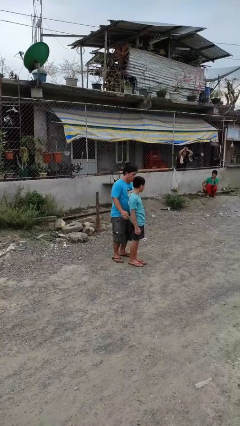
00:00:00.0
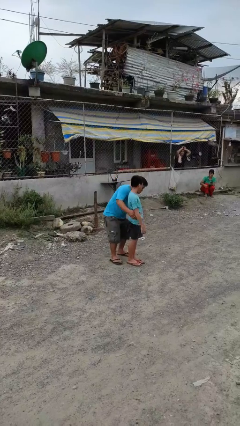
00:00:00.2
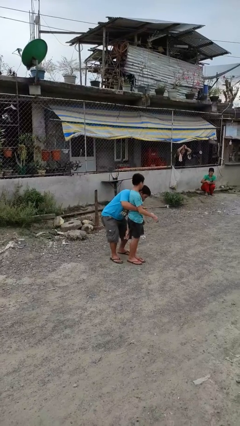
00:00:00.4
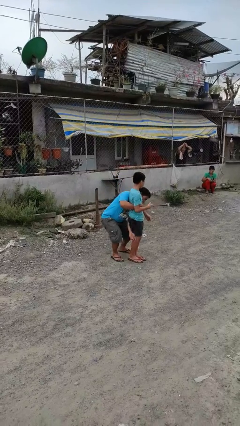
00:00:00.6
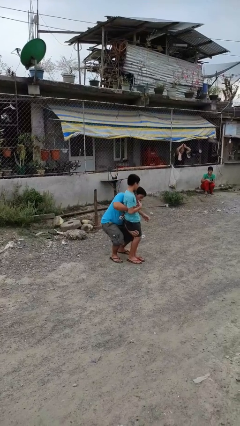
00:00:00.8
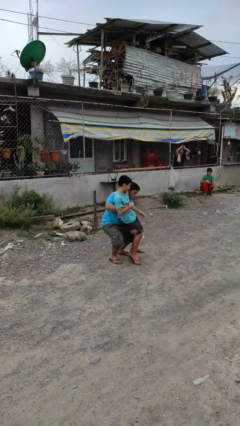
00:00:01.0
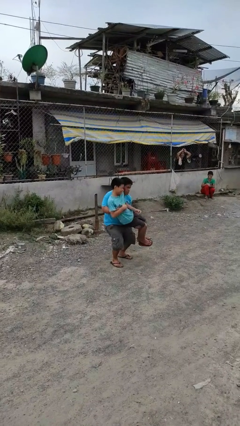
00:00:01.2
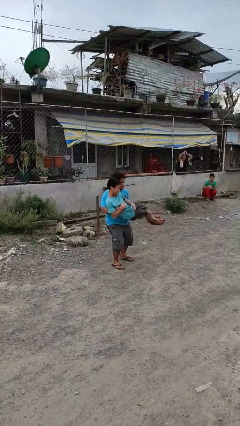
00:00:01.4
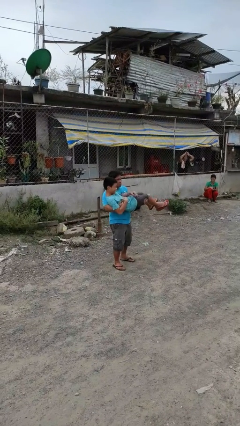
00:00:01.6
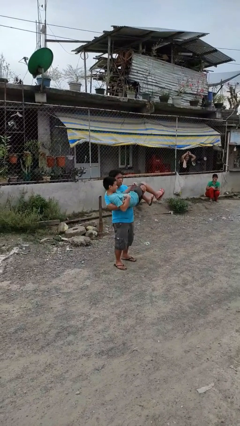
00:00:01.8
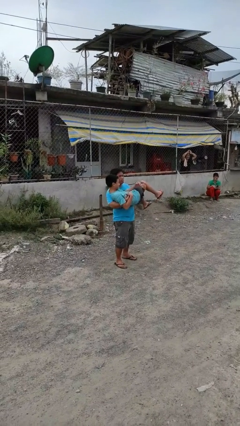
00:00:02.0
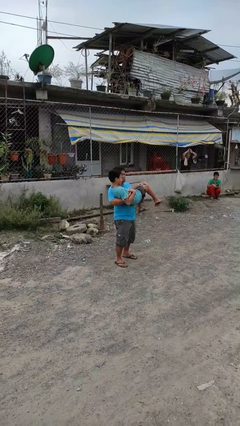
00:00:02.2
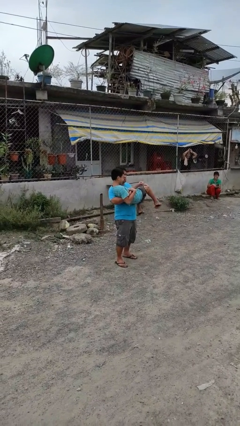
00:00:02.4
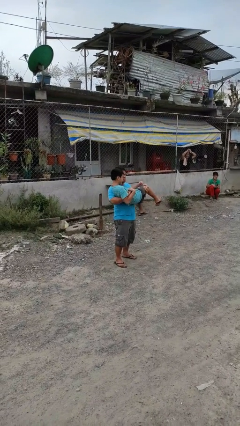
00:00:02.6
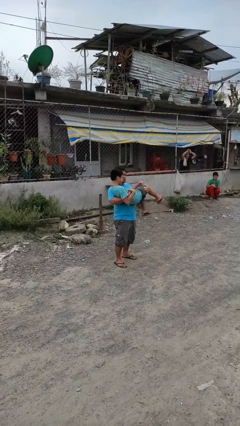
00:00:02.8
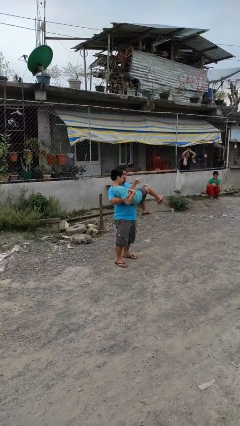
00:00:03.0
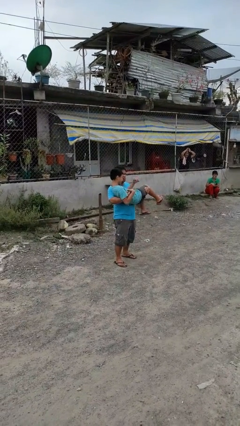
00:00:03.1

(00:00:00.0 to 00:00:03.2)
person picks up person

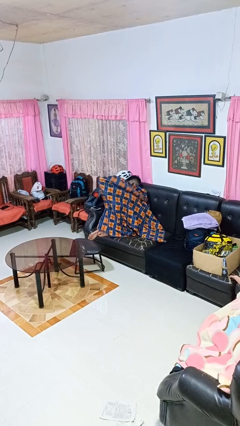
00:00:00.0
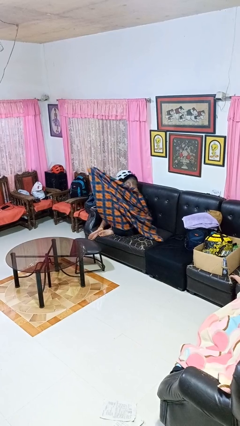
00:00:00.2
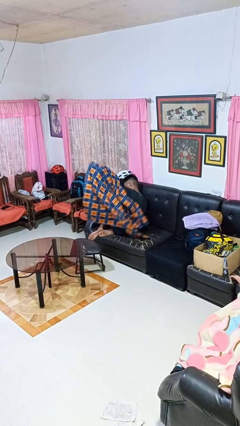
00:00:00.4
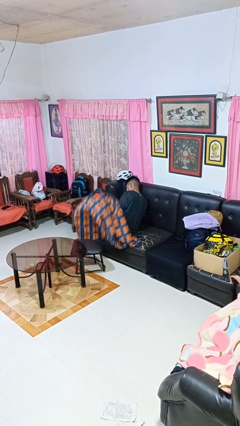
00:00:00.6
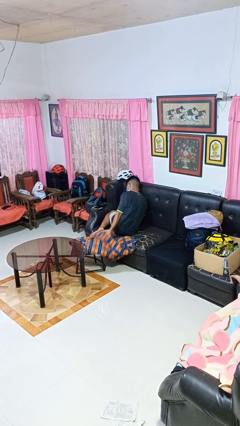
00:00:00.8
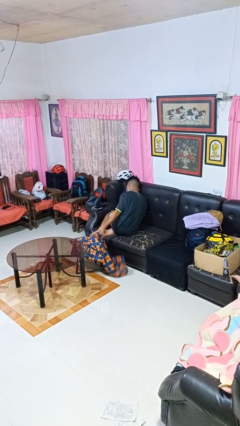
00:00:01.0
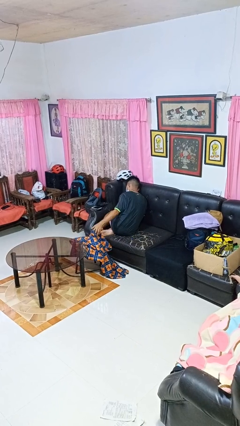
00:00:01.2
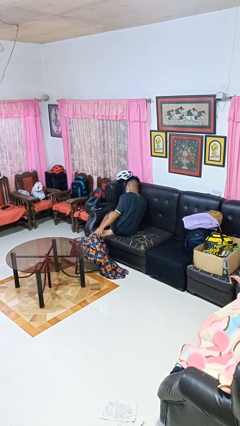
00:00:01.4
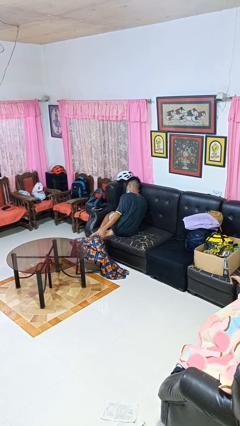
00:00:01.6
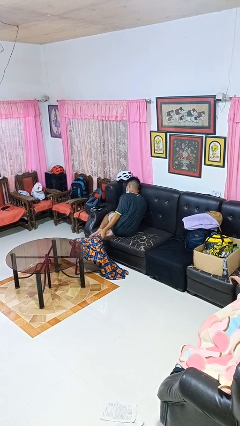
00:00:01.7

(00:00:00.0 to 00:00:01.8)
person uncovers with blanket

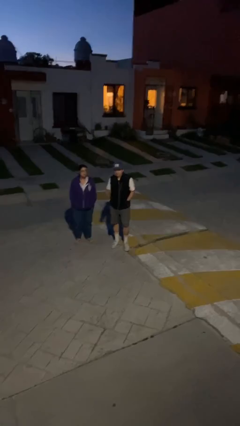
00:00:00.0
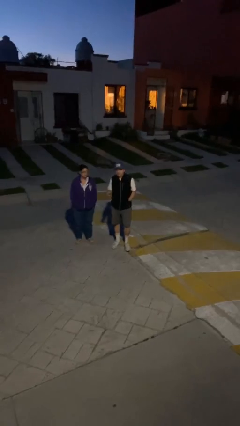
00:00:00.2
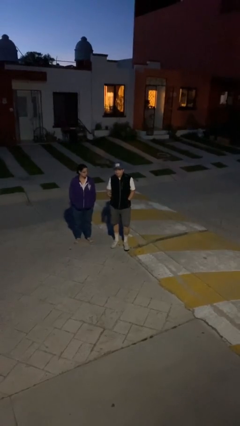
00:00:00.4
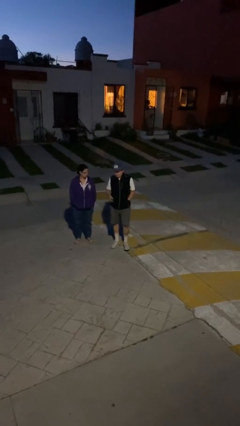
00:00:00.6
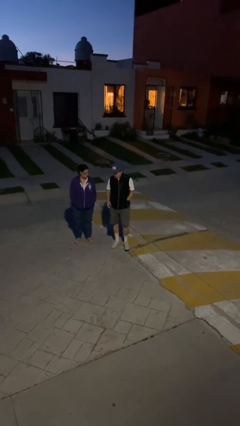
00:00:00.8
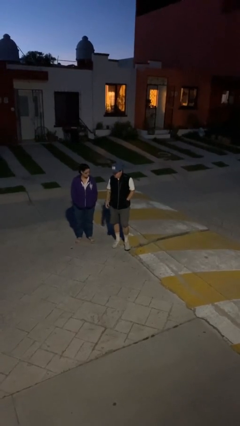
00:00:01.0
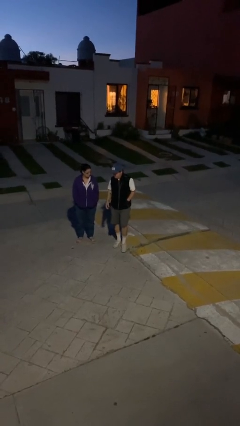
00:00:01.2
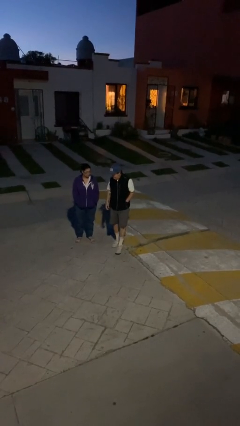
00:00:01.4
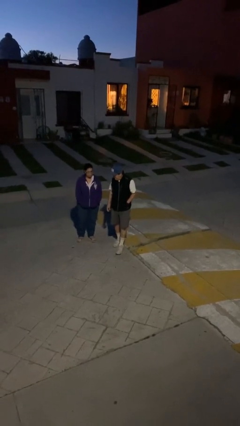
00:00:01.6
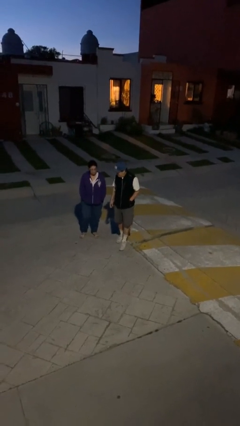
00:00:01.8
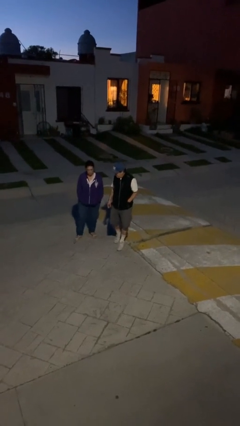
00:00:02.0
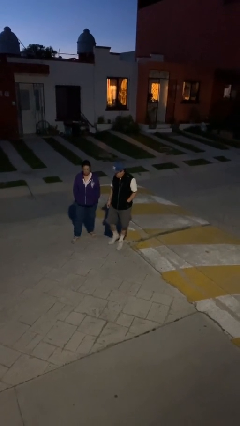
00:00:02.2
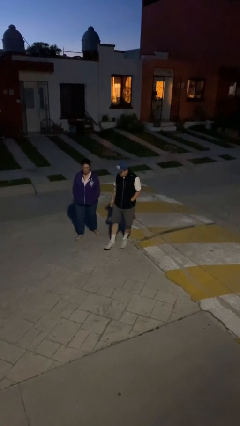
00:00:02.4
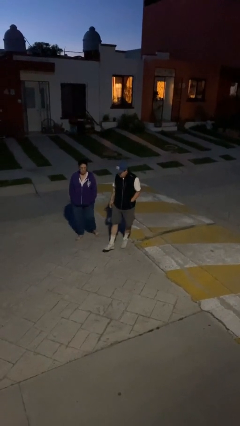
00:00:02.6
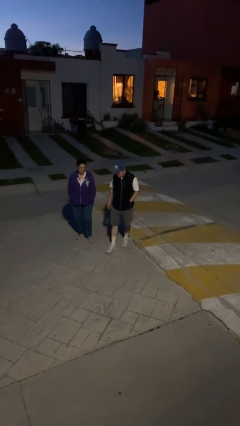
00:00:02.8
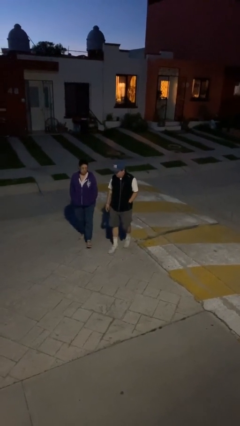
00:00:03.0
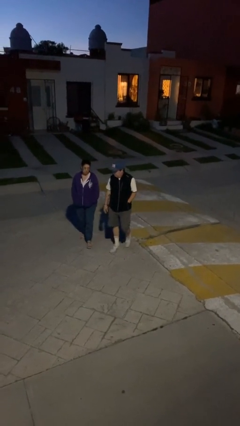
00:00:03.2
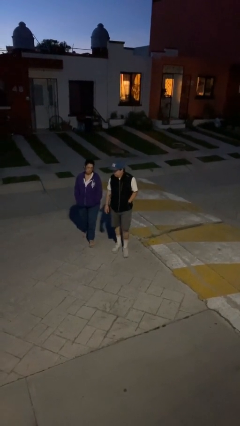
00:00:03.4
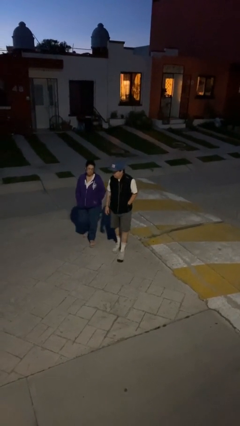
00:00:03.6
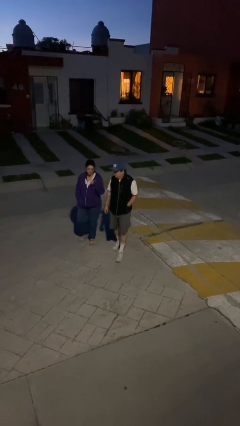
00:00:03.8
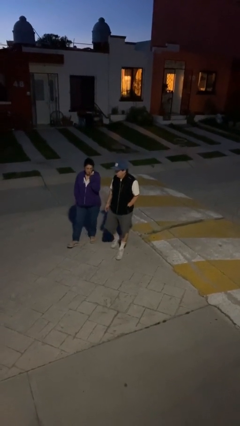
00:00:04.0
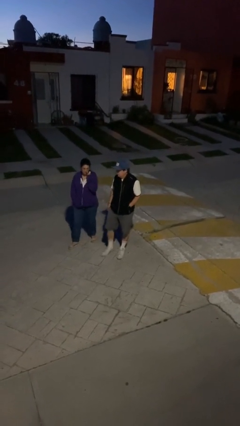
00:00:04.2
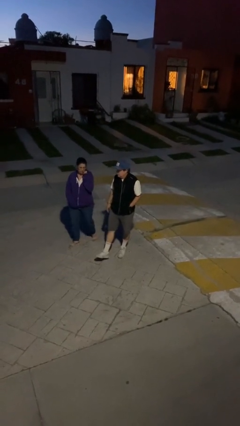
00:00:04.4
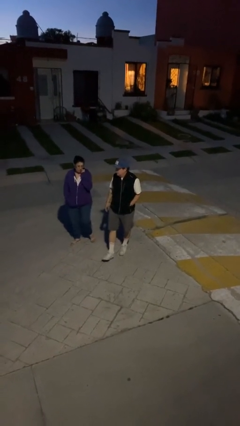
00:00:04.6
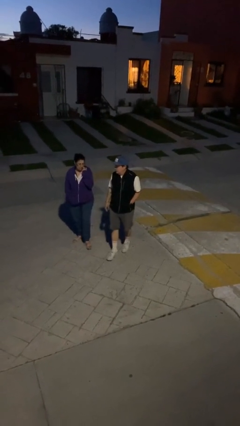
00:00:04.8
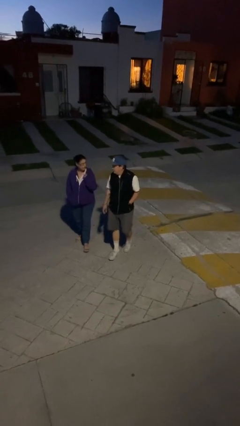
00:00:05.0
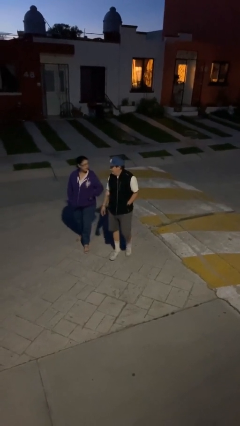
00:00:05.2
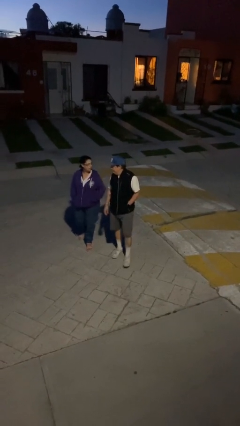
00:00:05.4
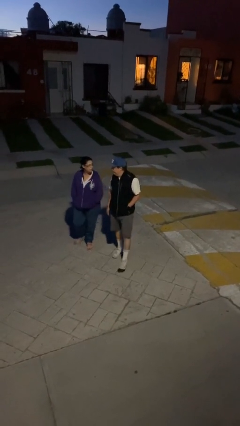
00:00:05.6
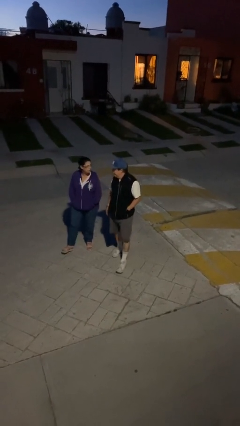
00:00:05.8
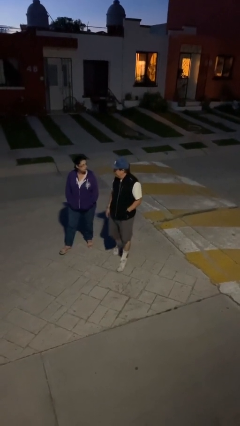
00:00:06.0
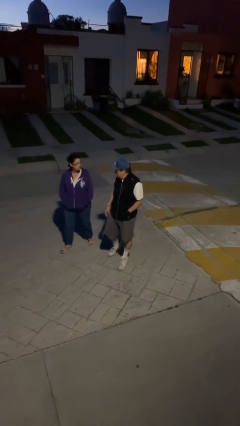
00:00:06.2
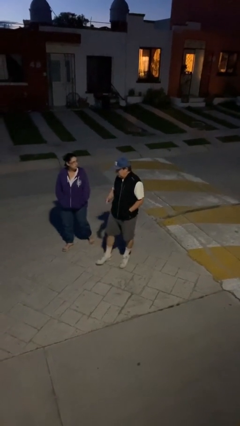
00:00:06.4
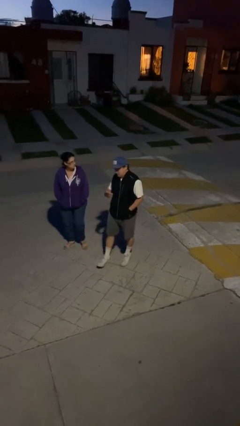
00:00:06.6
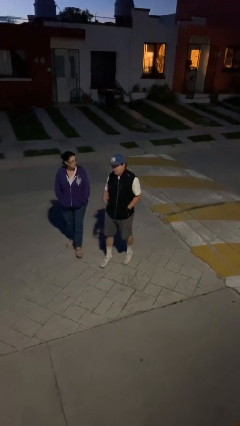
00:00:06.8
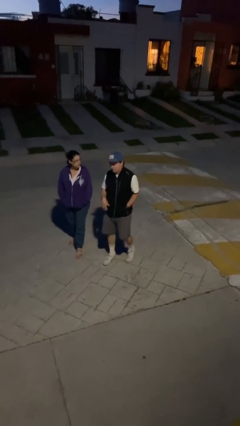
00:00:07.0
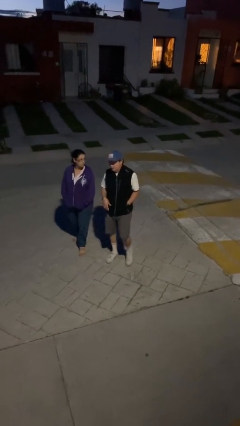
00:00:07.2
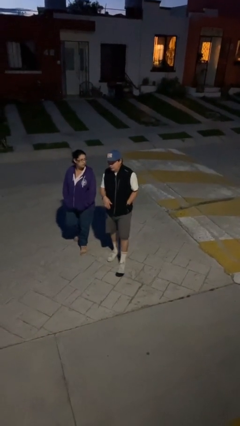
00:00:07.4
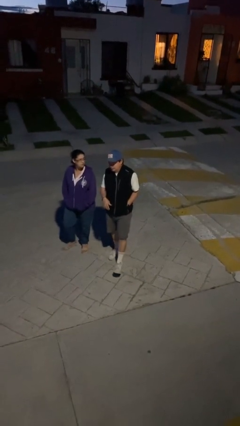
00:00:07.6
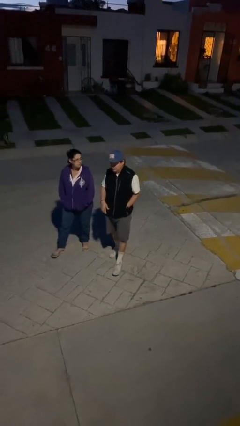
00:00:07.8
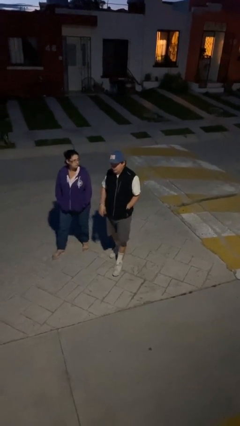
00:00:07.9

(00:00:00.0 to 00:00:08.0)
person talks to person

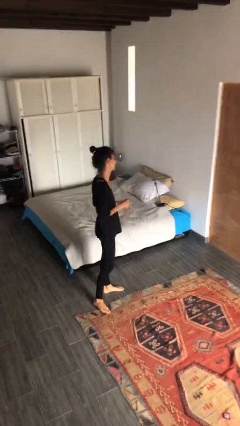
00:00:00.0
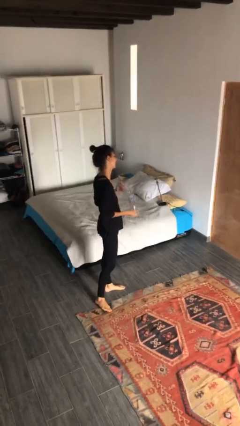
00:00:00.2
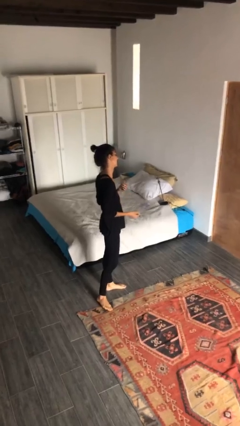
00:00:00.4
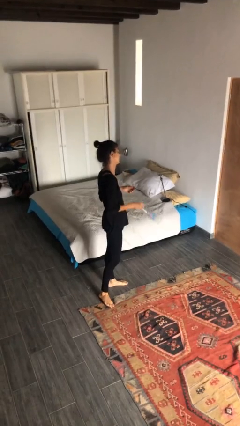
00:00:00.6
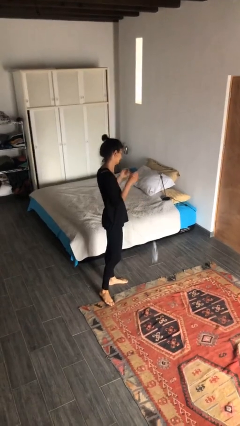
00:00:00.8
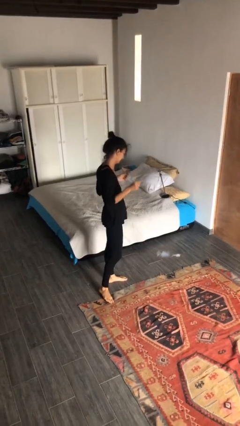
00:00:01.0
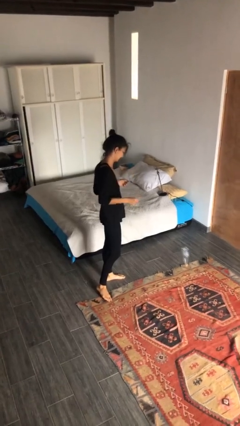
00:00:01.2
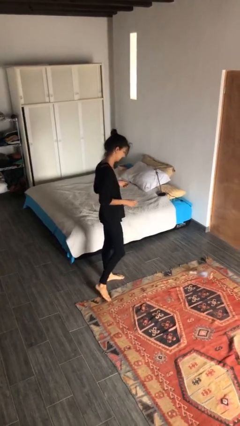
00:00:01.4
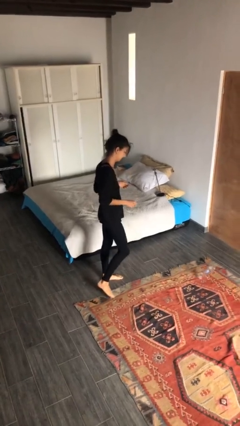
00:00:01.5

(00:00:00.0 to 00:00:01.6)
person drops object

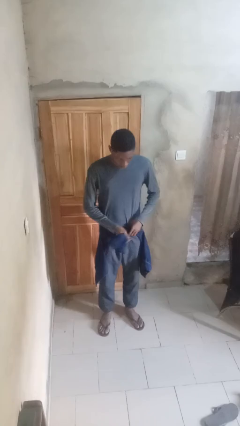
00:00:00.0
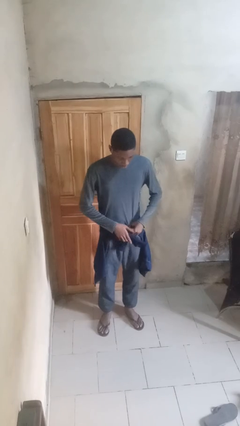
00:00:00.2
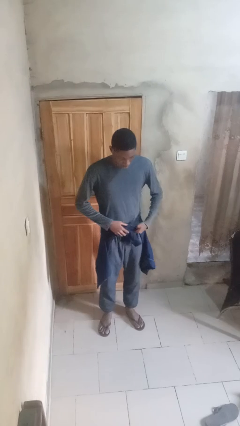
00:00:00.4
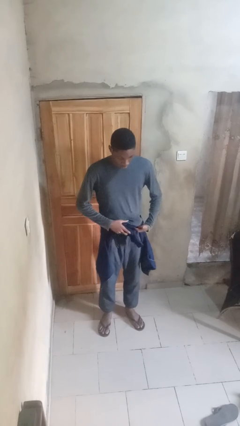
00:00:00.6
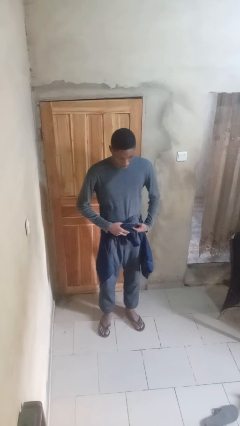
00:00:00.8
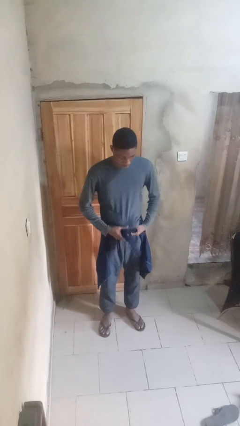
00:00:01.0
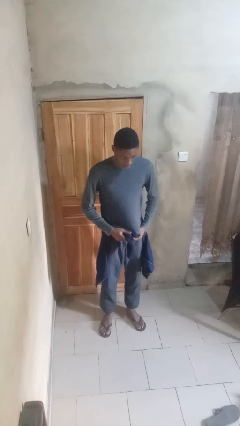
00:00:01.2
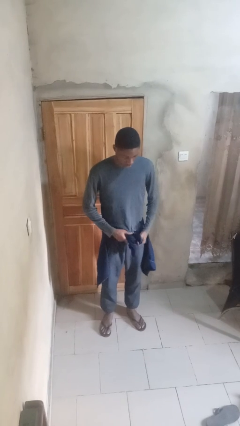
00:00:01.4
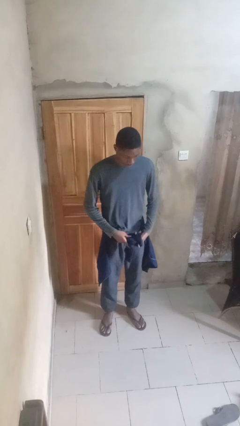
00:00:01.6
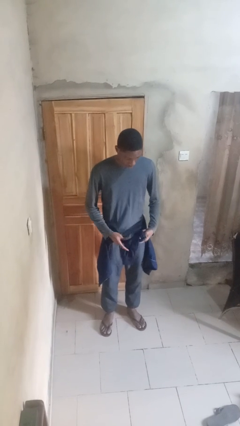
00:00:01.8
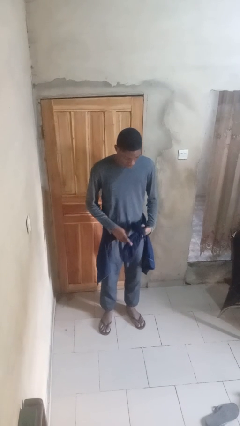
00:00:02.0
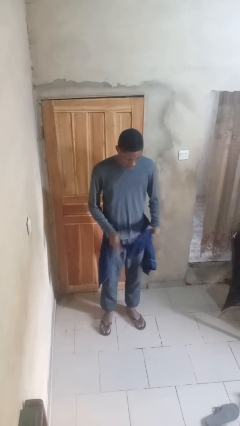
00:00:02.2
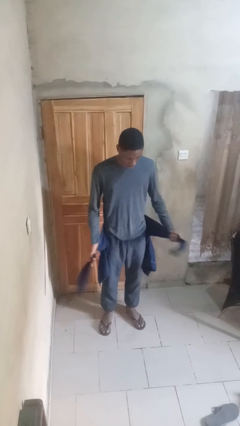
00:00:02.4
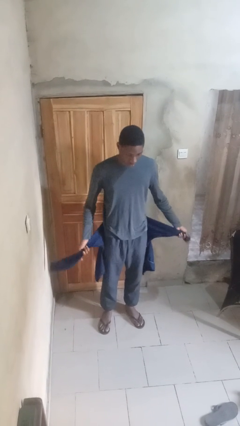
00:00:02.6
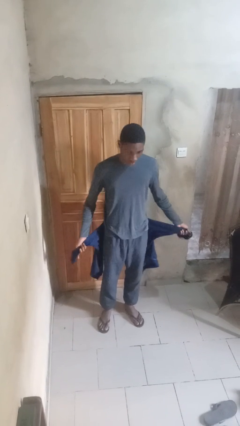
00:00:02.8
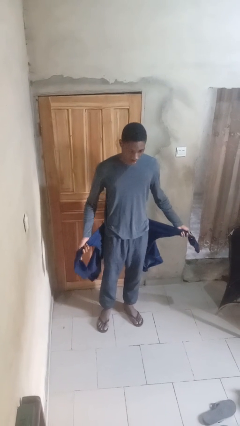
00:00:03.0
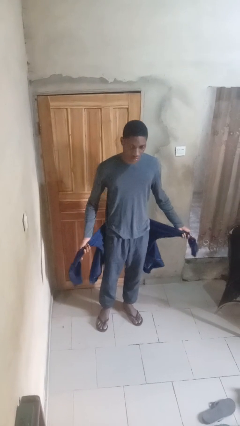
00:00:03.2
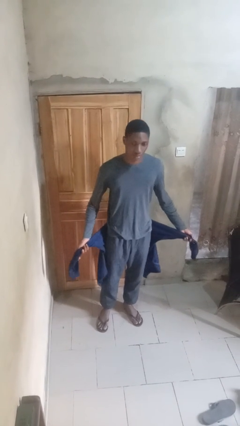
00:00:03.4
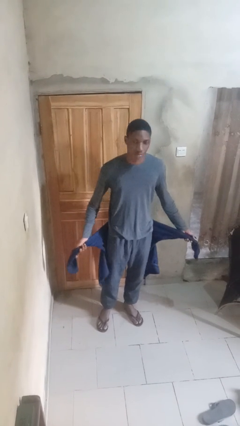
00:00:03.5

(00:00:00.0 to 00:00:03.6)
person unties jacket around waist
